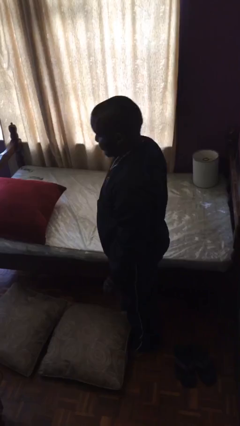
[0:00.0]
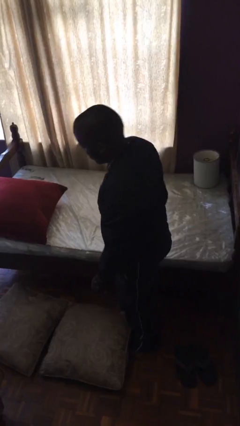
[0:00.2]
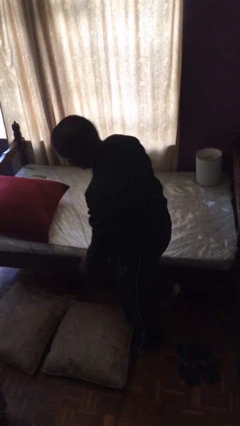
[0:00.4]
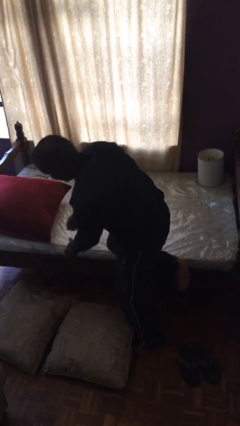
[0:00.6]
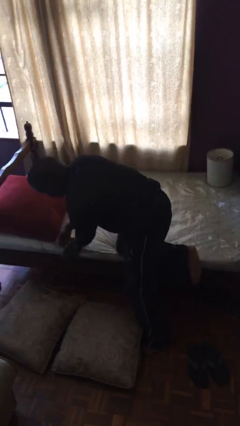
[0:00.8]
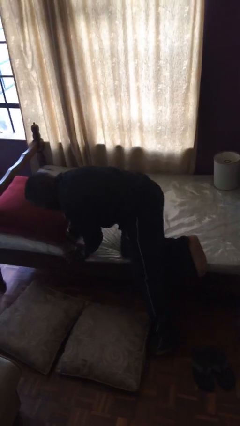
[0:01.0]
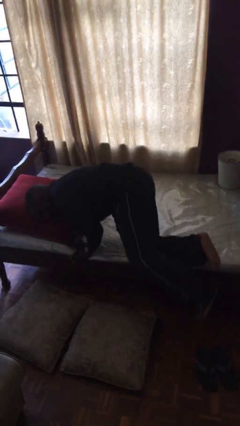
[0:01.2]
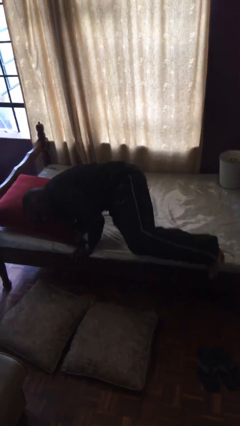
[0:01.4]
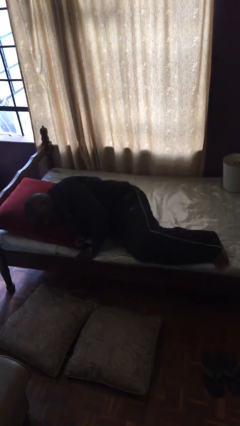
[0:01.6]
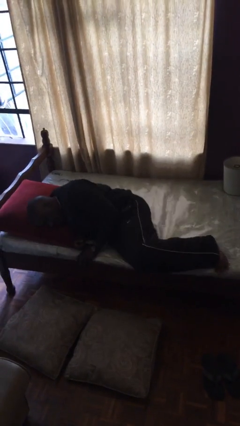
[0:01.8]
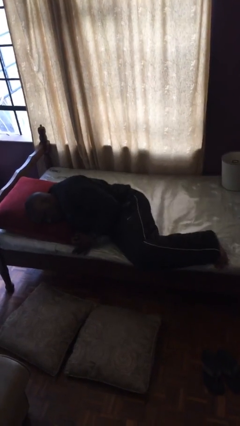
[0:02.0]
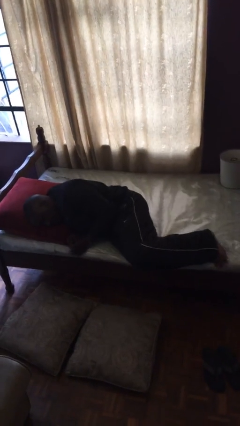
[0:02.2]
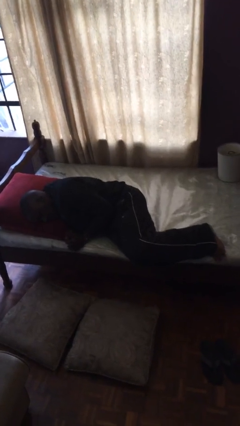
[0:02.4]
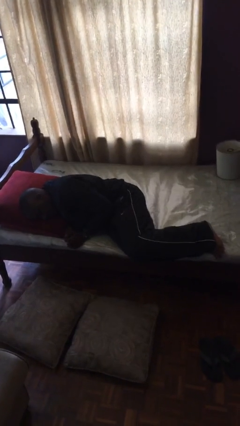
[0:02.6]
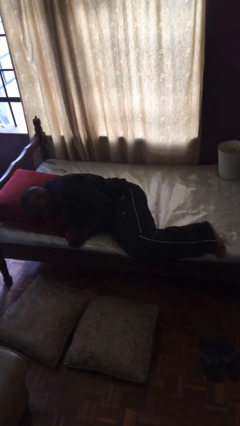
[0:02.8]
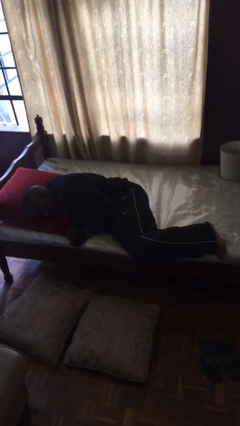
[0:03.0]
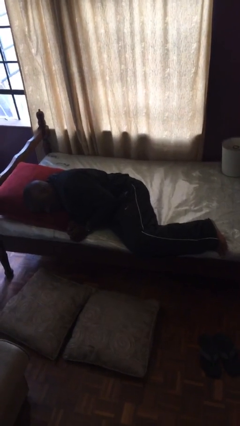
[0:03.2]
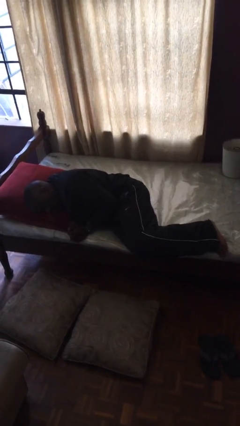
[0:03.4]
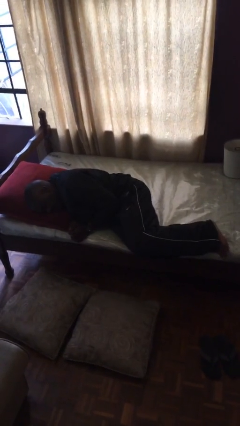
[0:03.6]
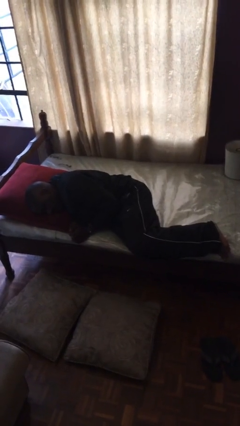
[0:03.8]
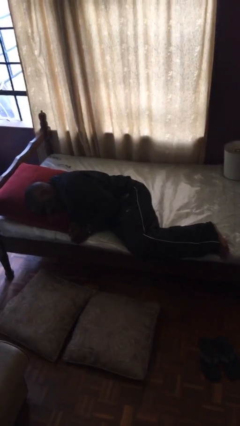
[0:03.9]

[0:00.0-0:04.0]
person lies down on bed

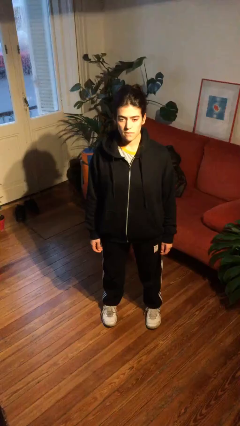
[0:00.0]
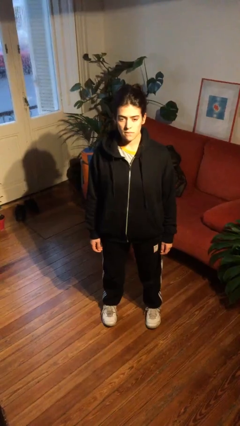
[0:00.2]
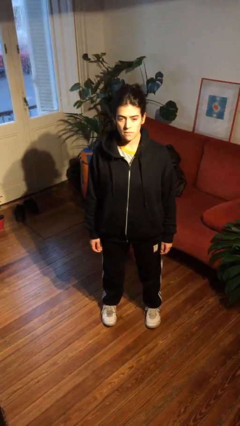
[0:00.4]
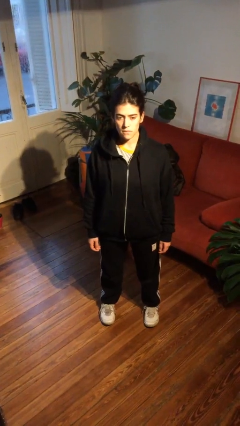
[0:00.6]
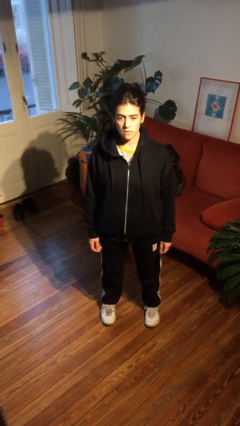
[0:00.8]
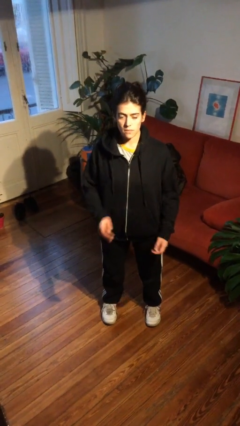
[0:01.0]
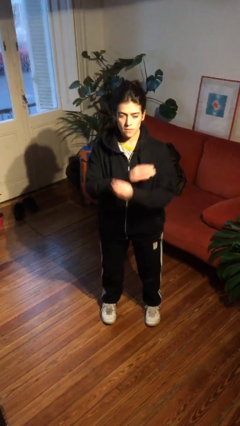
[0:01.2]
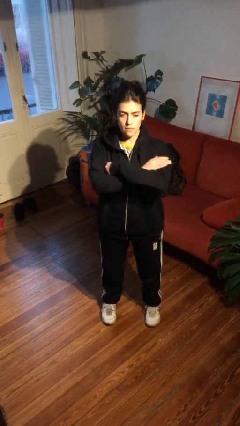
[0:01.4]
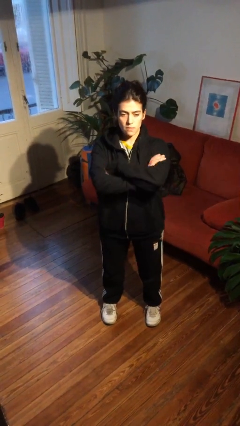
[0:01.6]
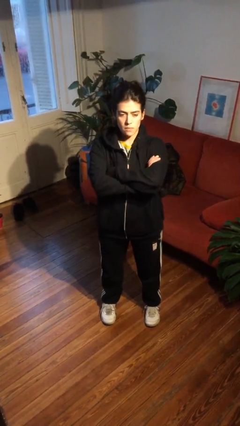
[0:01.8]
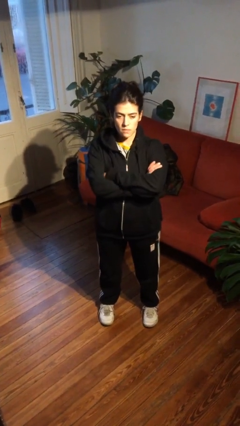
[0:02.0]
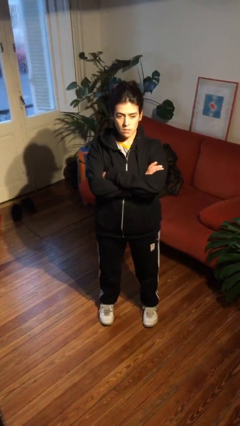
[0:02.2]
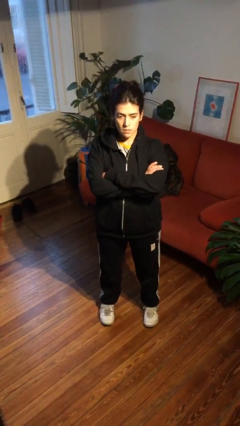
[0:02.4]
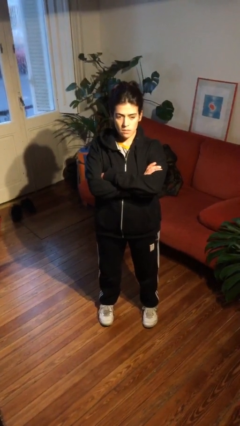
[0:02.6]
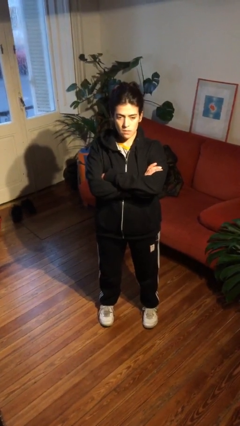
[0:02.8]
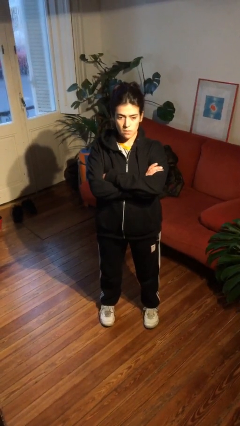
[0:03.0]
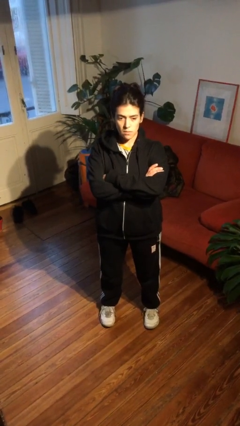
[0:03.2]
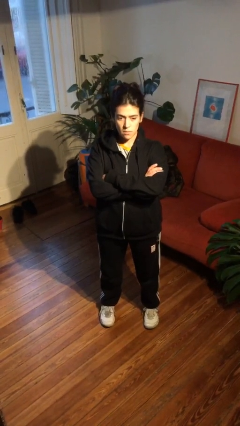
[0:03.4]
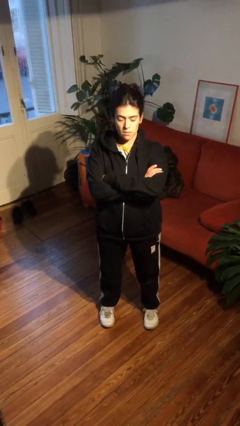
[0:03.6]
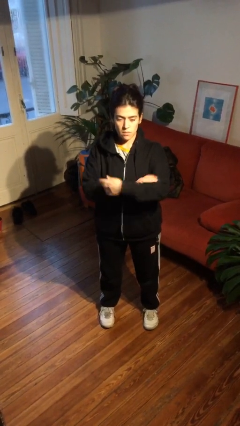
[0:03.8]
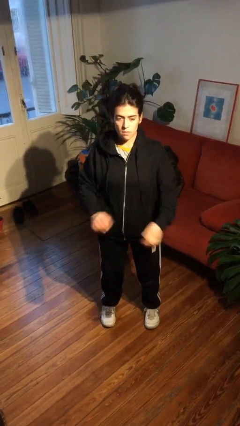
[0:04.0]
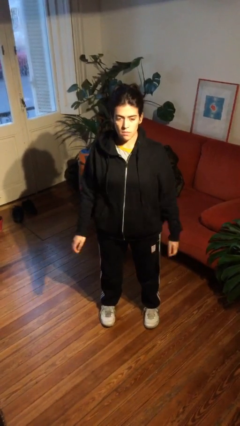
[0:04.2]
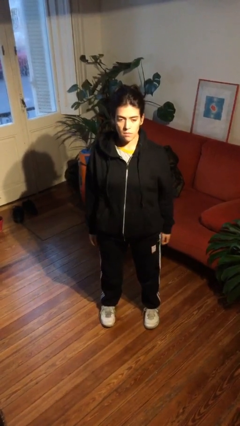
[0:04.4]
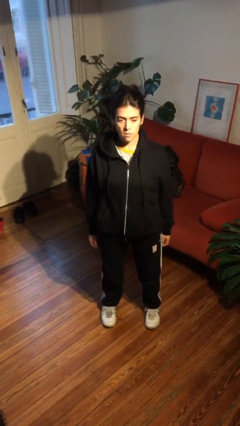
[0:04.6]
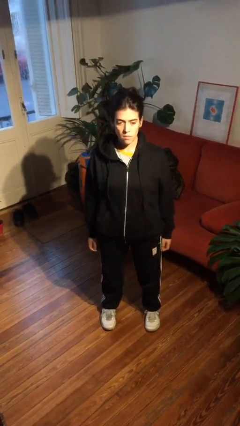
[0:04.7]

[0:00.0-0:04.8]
person crosses arms

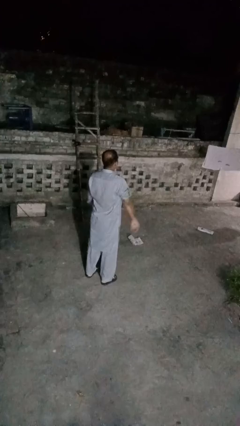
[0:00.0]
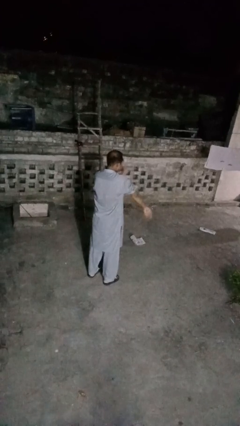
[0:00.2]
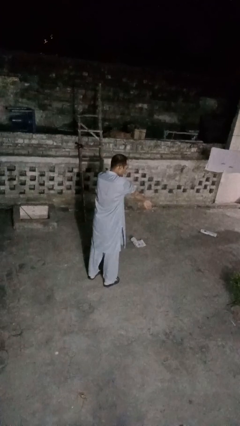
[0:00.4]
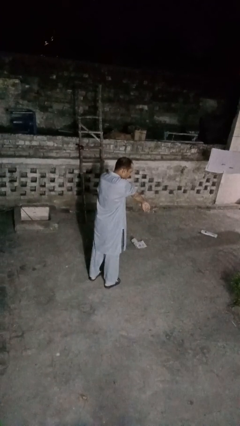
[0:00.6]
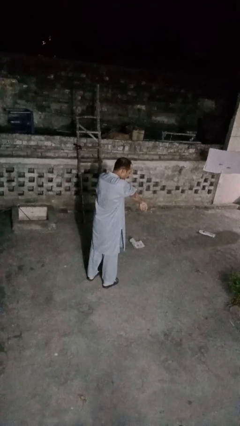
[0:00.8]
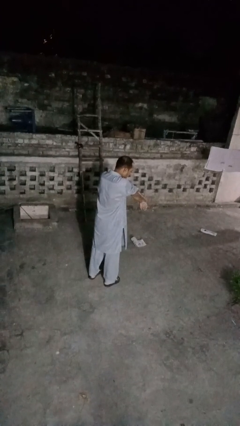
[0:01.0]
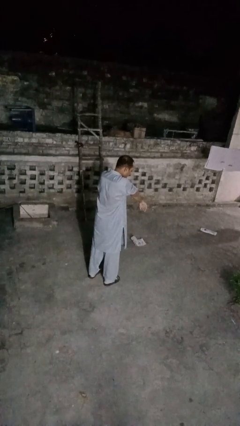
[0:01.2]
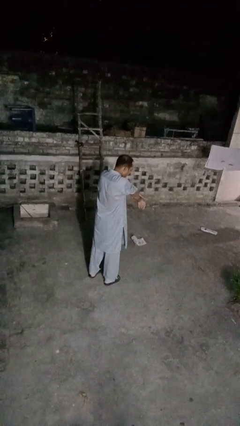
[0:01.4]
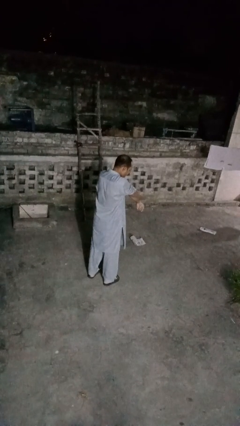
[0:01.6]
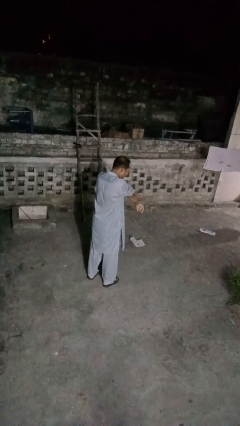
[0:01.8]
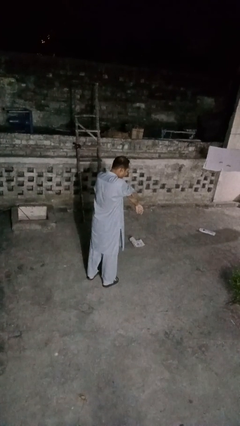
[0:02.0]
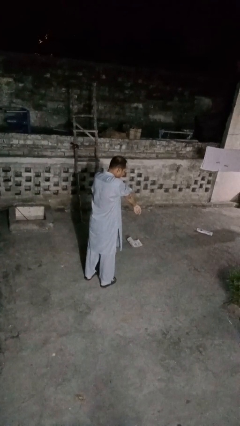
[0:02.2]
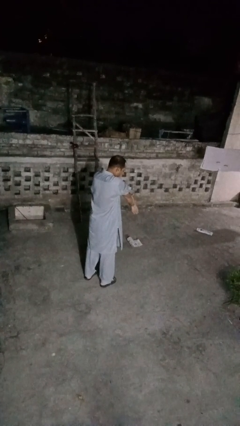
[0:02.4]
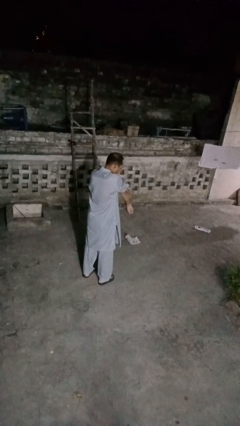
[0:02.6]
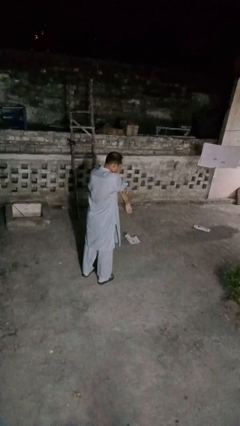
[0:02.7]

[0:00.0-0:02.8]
person swats bug

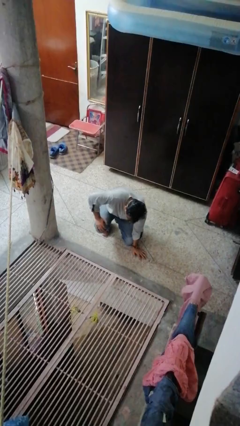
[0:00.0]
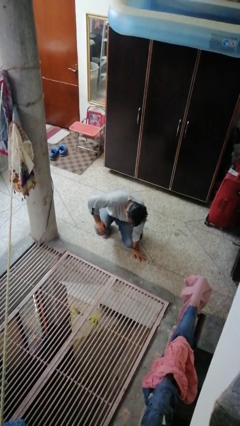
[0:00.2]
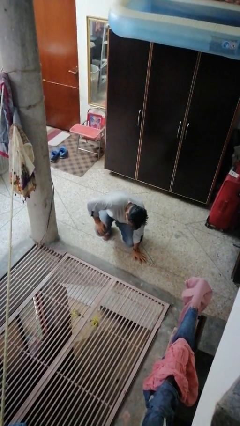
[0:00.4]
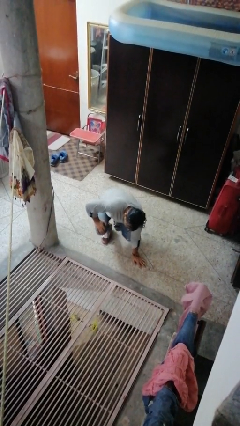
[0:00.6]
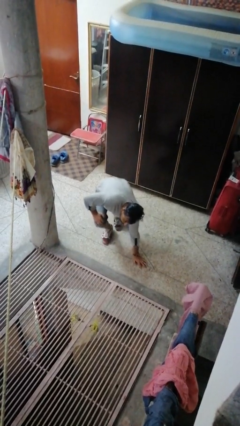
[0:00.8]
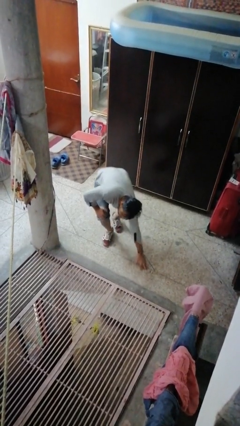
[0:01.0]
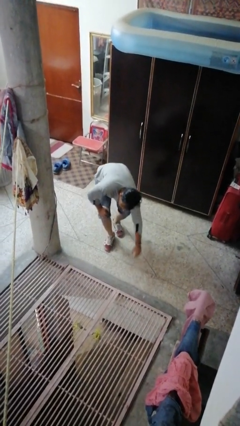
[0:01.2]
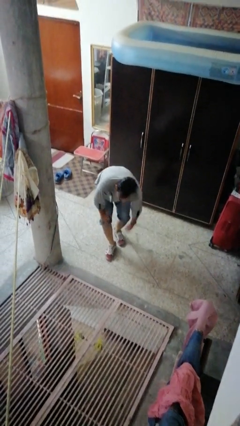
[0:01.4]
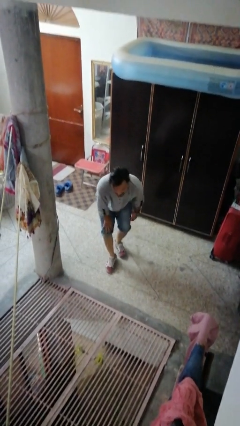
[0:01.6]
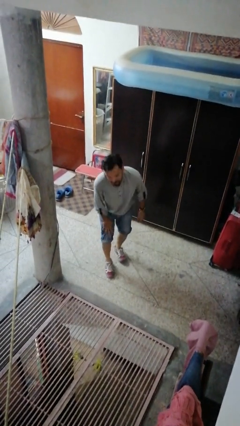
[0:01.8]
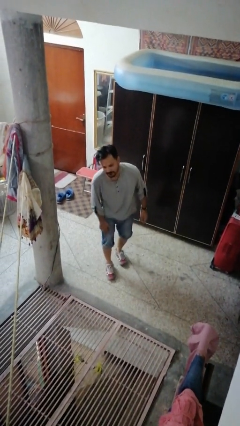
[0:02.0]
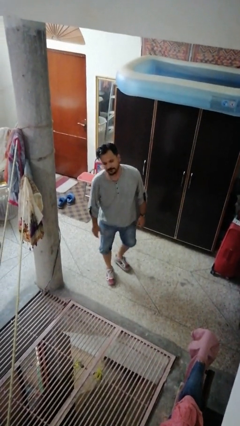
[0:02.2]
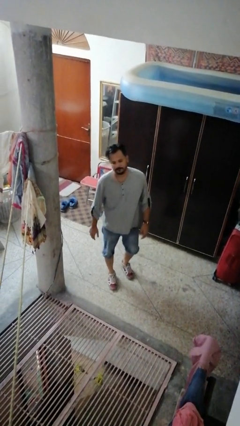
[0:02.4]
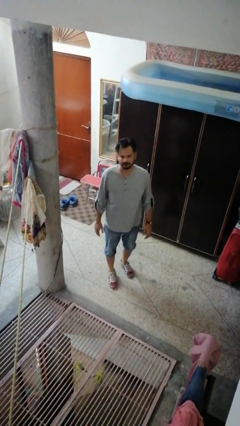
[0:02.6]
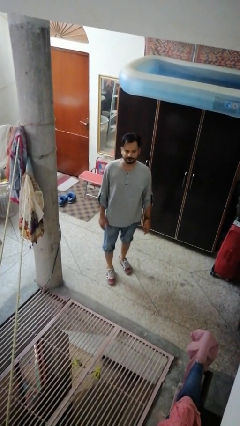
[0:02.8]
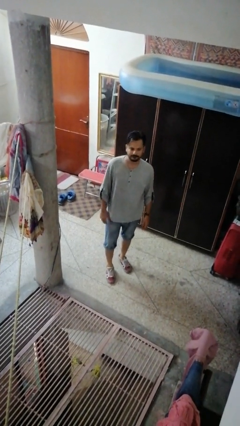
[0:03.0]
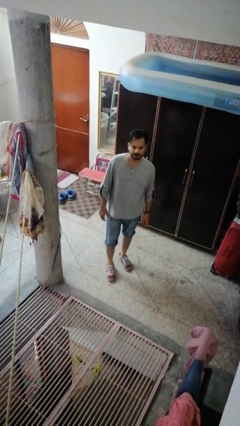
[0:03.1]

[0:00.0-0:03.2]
person stands up from floor

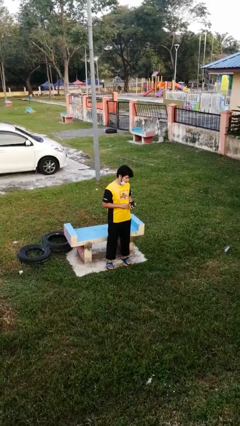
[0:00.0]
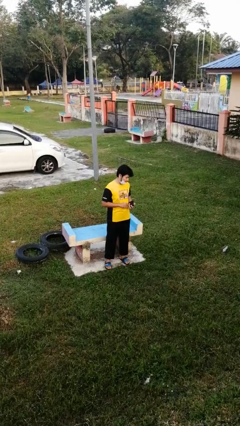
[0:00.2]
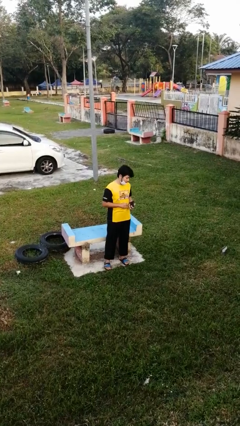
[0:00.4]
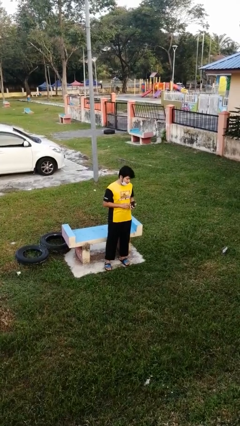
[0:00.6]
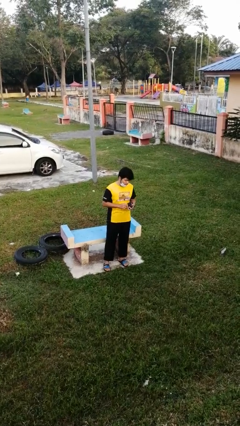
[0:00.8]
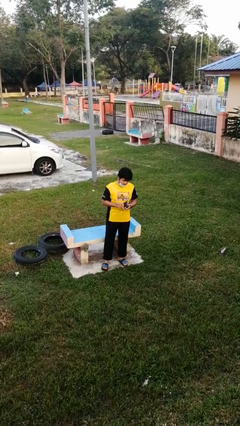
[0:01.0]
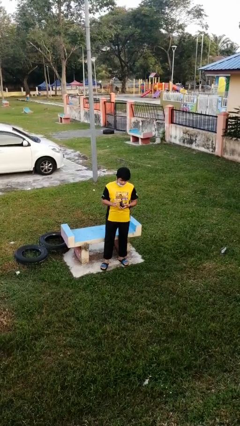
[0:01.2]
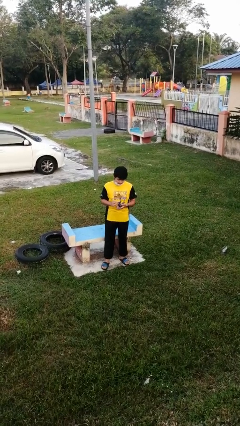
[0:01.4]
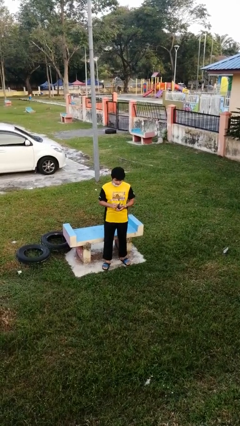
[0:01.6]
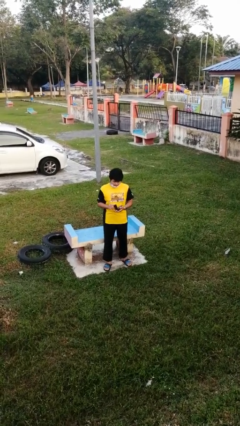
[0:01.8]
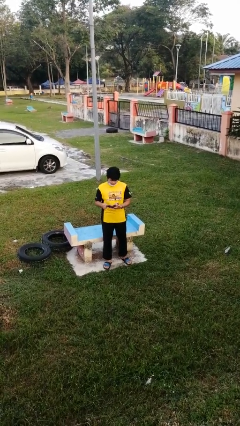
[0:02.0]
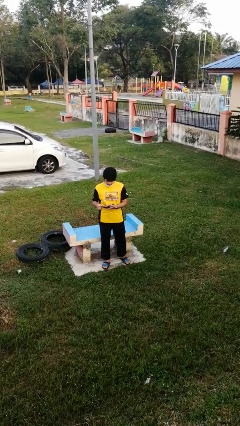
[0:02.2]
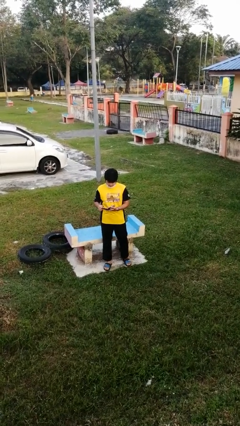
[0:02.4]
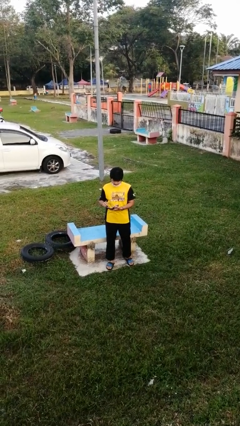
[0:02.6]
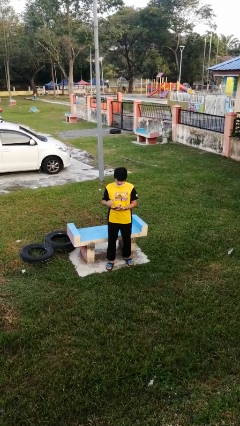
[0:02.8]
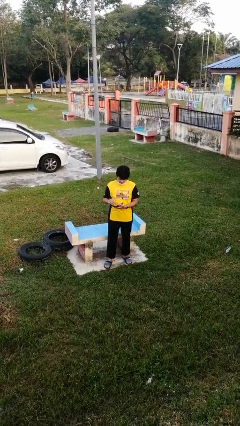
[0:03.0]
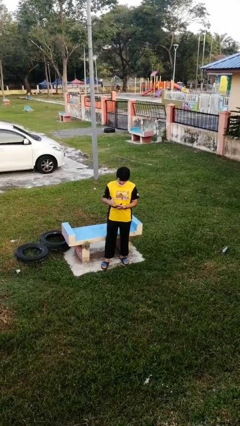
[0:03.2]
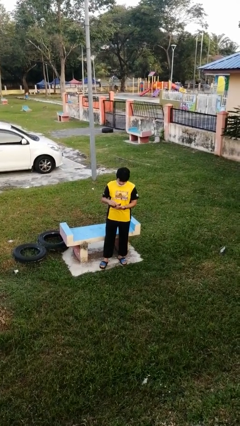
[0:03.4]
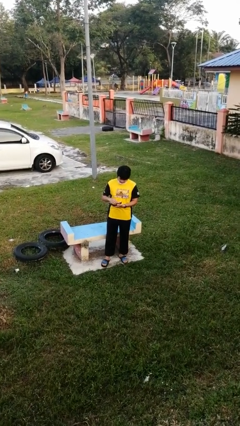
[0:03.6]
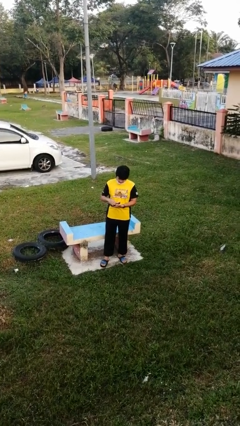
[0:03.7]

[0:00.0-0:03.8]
person searches in purse
